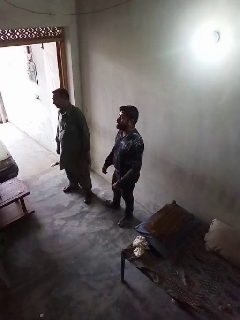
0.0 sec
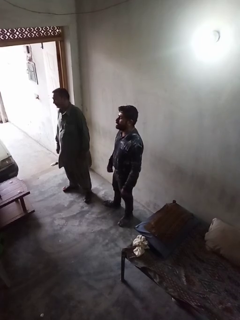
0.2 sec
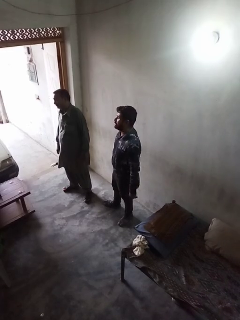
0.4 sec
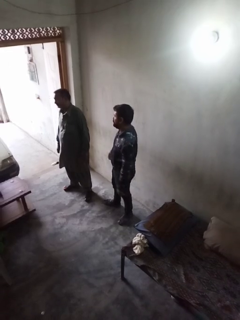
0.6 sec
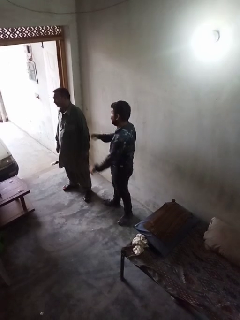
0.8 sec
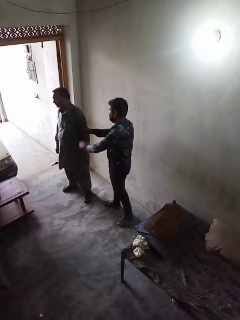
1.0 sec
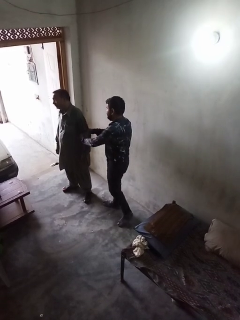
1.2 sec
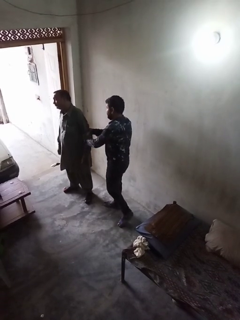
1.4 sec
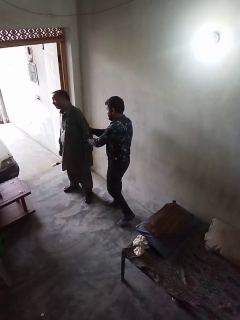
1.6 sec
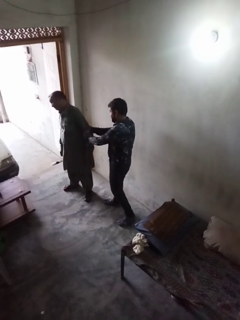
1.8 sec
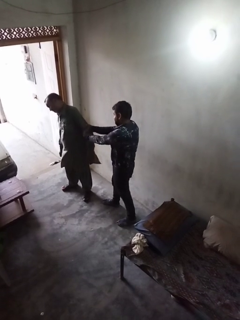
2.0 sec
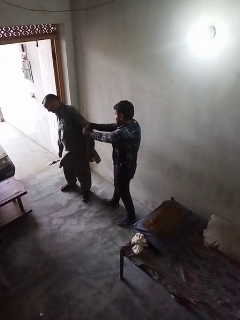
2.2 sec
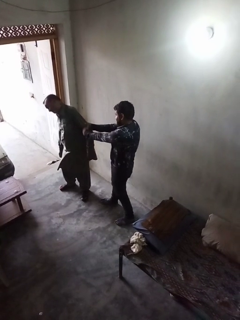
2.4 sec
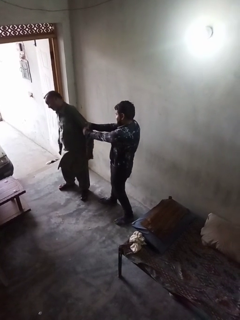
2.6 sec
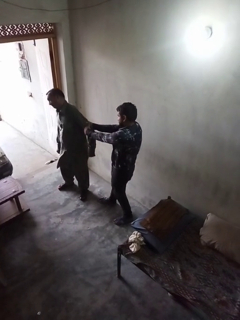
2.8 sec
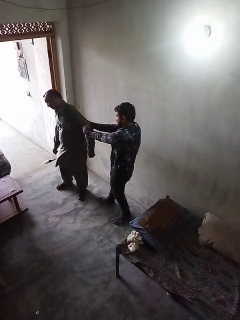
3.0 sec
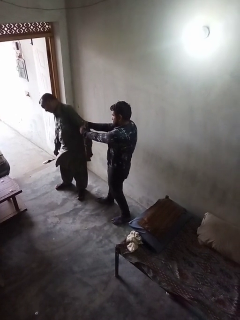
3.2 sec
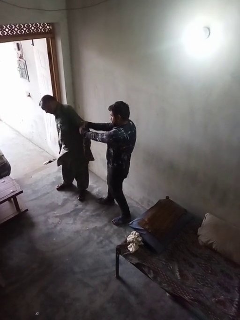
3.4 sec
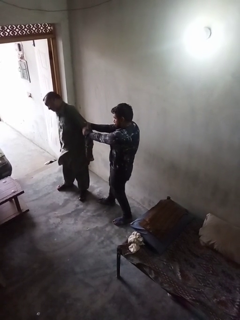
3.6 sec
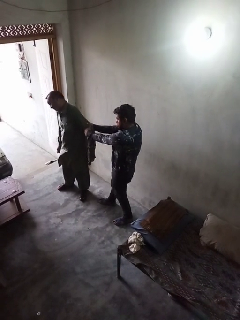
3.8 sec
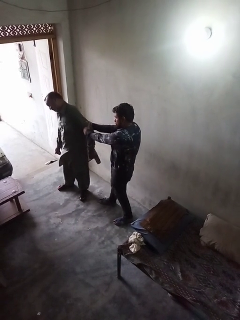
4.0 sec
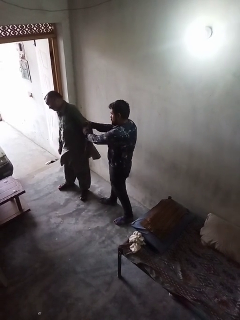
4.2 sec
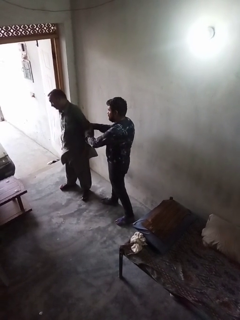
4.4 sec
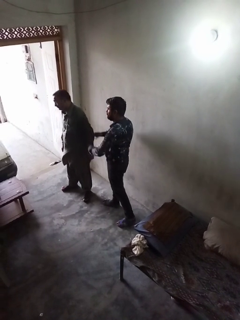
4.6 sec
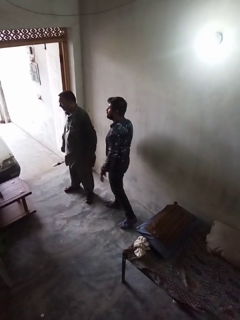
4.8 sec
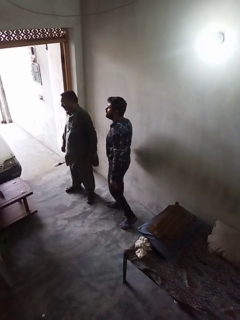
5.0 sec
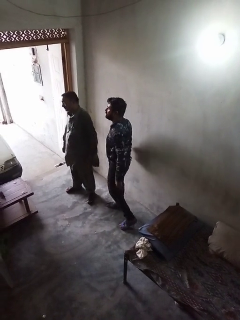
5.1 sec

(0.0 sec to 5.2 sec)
person grabs person by forearm

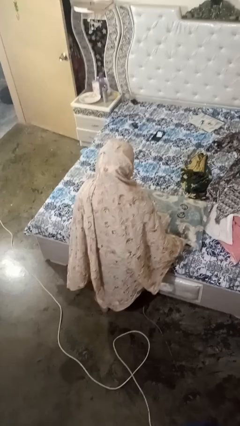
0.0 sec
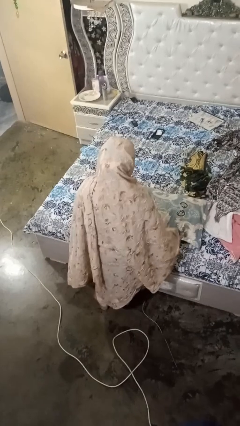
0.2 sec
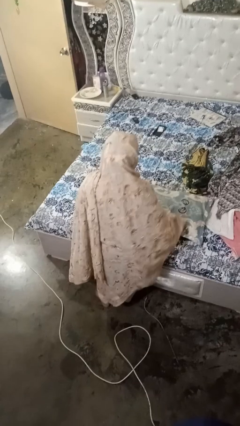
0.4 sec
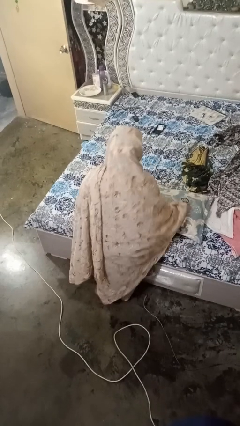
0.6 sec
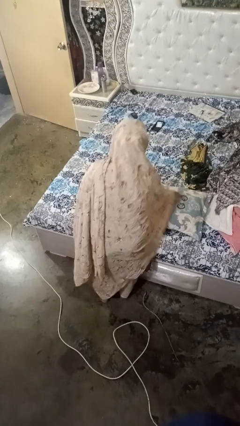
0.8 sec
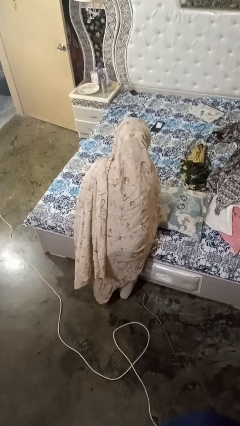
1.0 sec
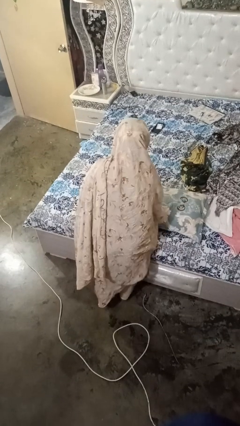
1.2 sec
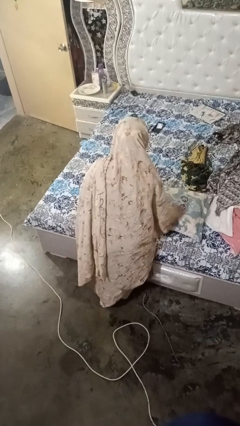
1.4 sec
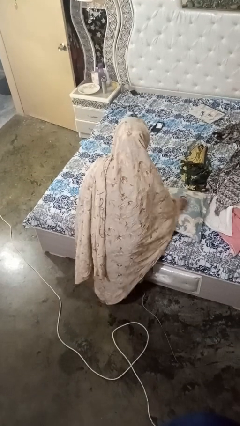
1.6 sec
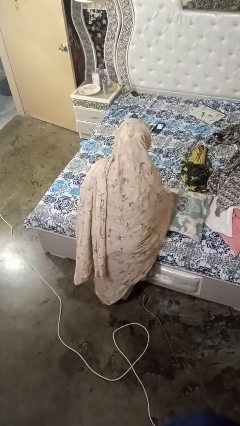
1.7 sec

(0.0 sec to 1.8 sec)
person waves hand over object

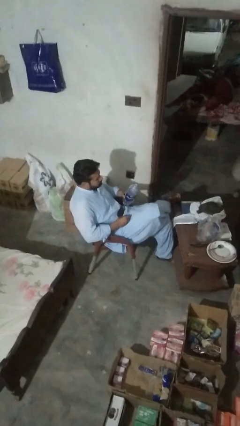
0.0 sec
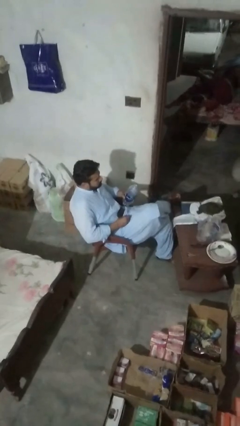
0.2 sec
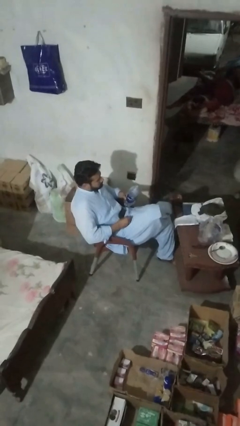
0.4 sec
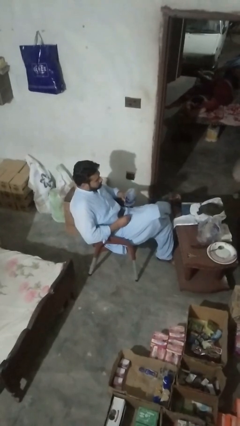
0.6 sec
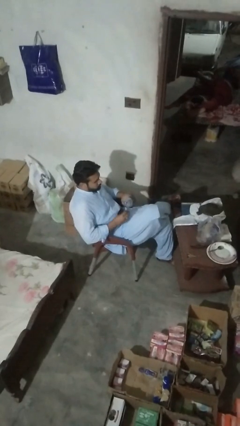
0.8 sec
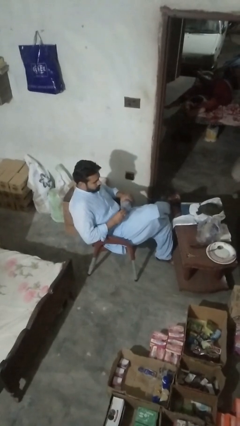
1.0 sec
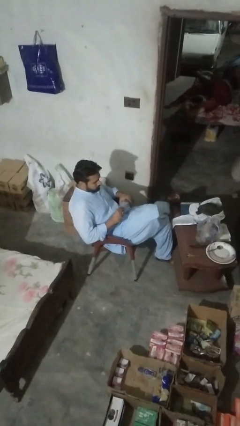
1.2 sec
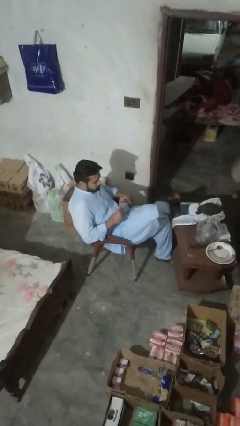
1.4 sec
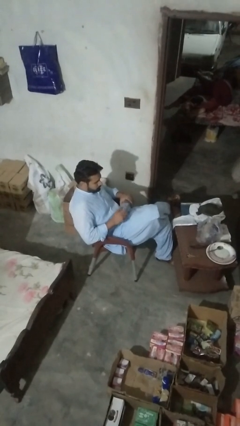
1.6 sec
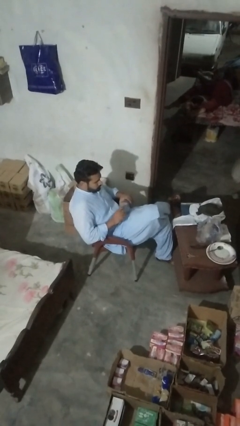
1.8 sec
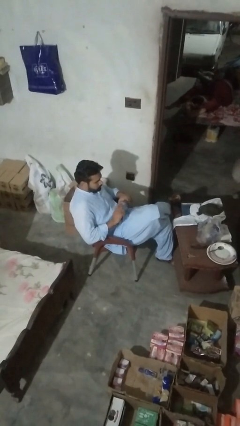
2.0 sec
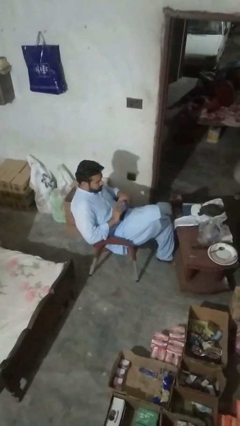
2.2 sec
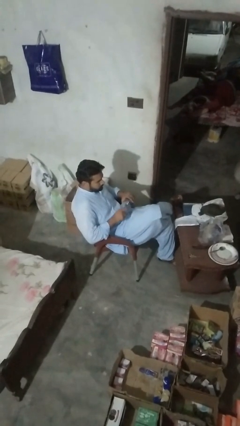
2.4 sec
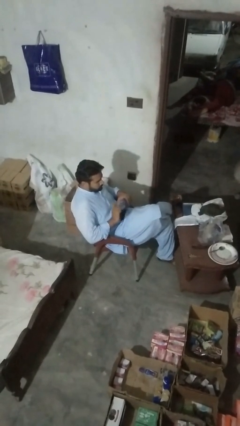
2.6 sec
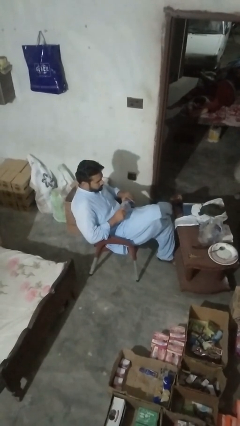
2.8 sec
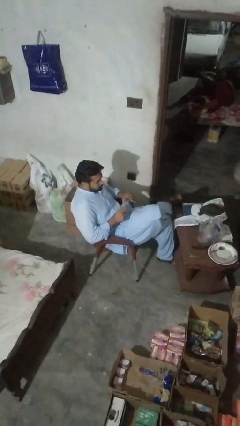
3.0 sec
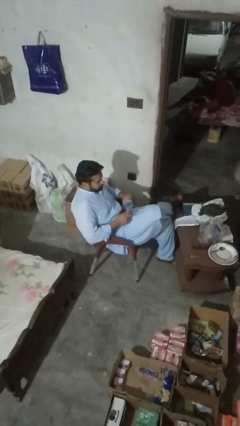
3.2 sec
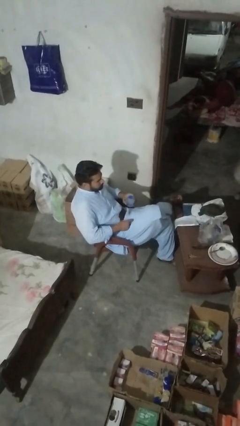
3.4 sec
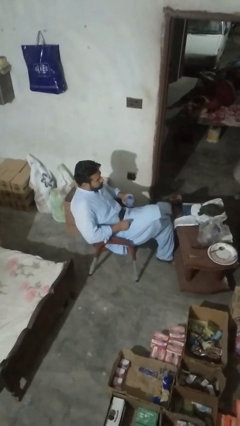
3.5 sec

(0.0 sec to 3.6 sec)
person screws lid to bottle

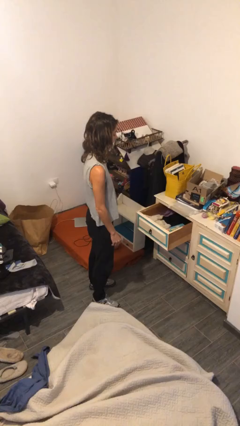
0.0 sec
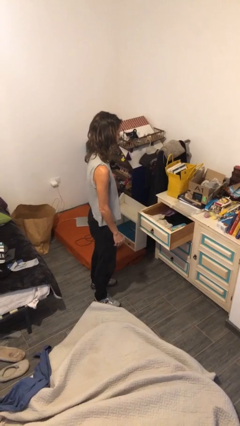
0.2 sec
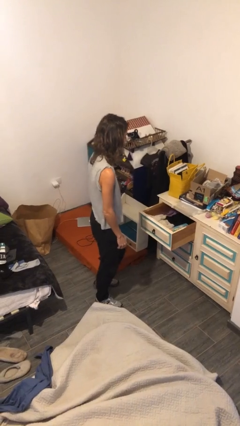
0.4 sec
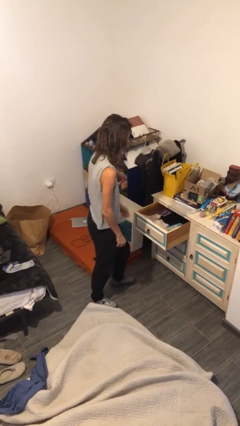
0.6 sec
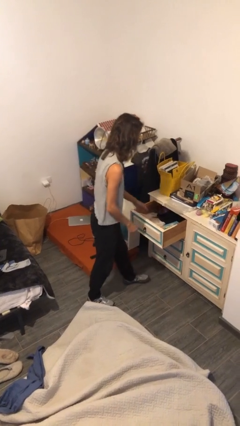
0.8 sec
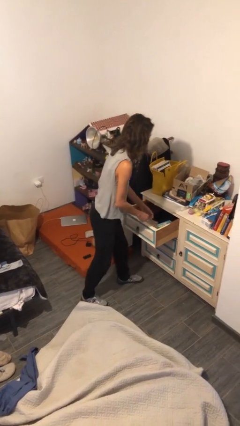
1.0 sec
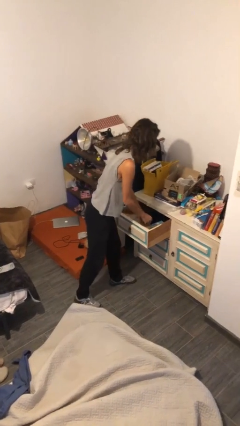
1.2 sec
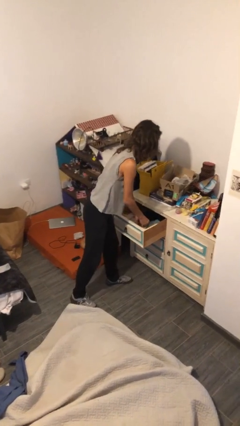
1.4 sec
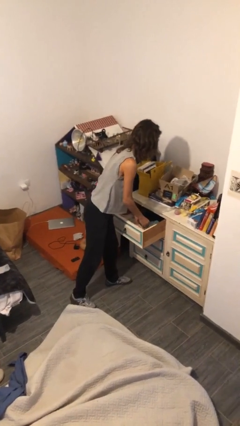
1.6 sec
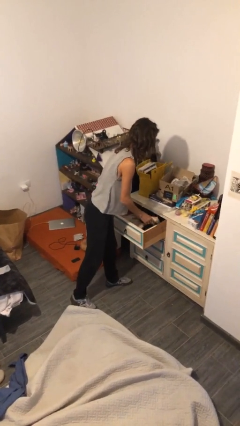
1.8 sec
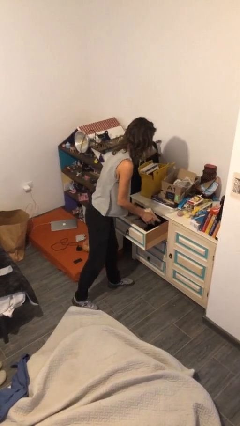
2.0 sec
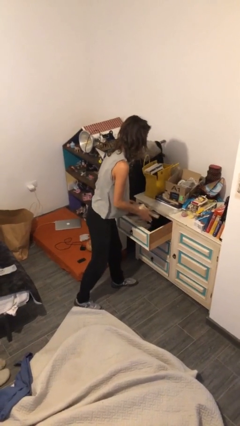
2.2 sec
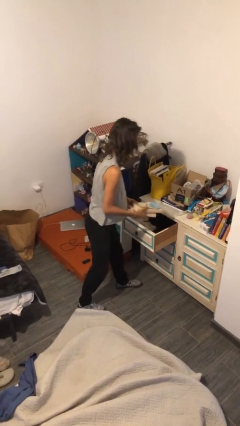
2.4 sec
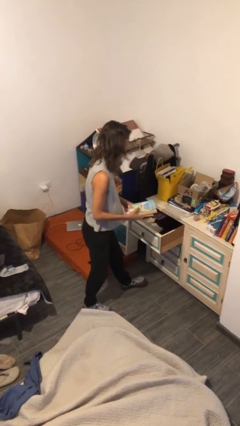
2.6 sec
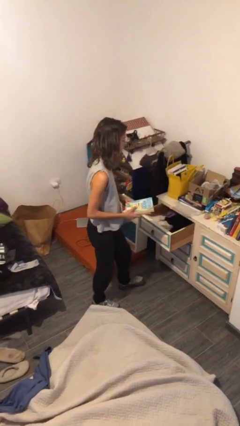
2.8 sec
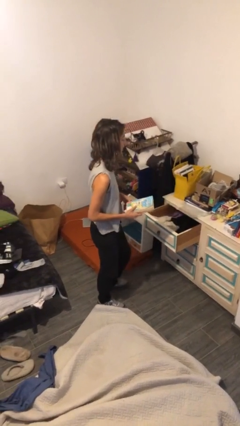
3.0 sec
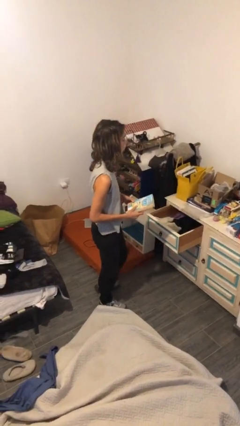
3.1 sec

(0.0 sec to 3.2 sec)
person picks up object from cabinet

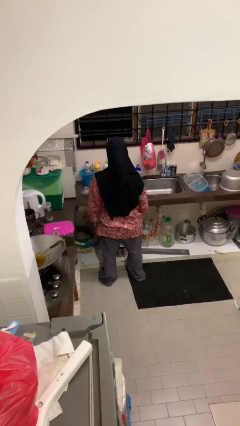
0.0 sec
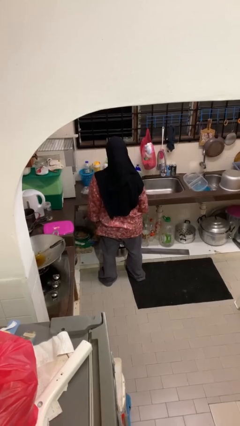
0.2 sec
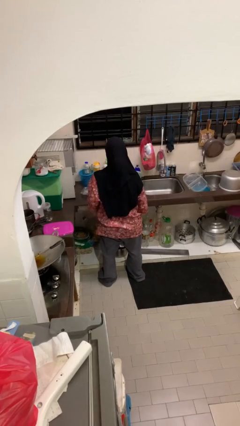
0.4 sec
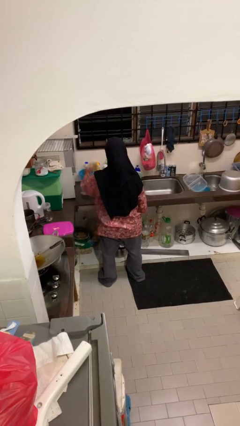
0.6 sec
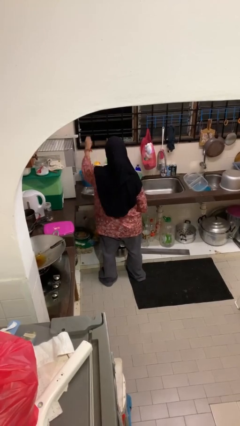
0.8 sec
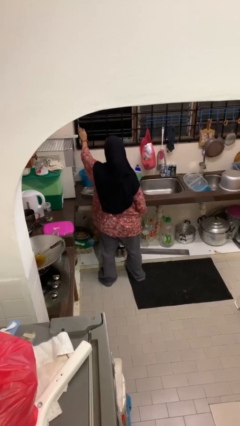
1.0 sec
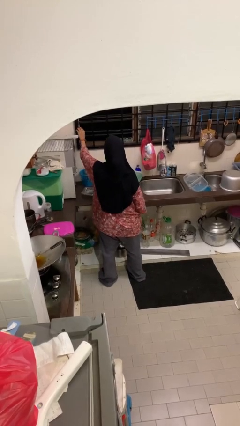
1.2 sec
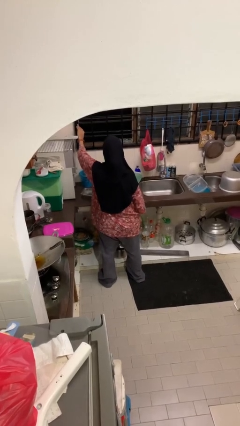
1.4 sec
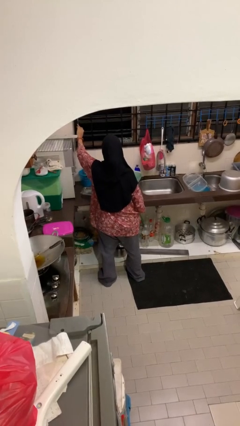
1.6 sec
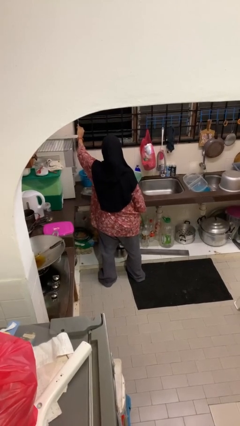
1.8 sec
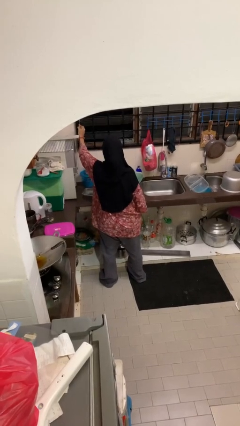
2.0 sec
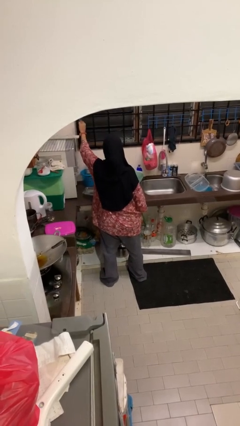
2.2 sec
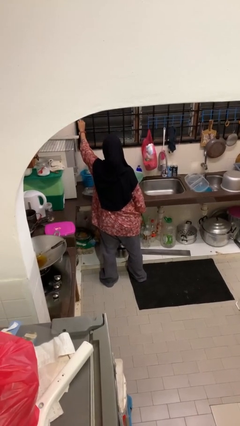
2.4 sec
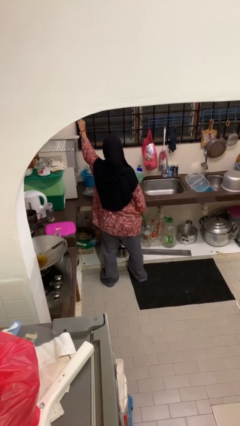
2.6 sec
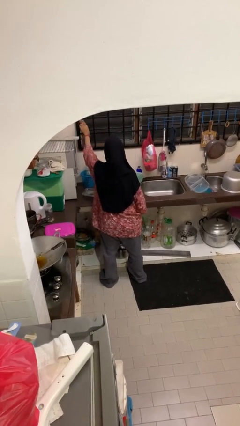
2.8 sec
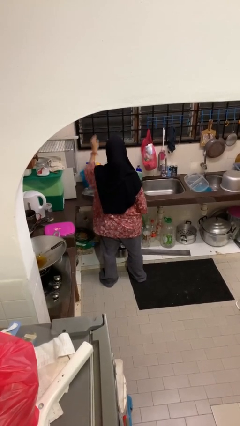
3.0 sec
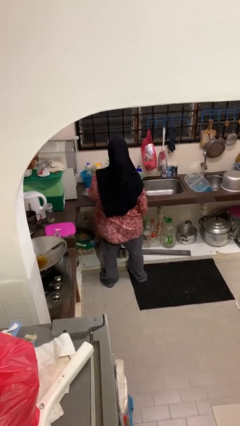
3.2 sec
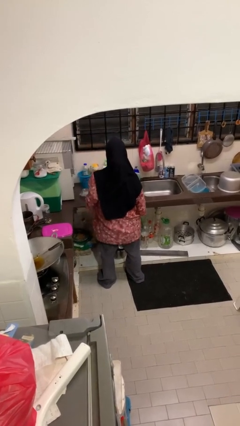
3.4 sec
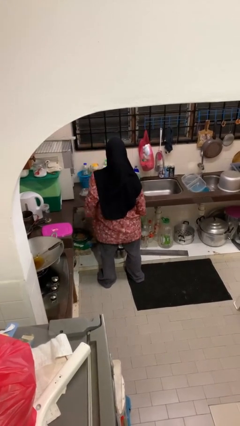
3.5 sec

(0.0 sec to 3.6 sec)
person closes home window

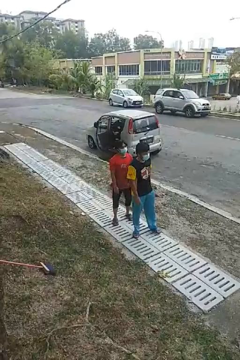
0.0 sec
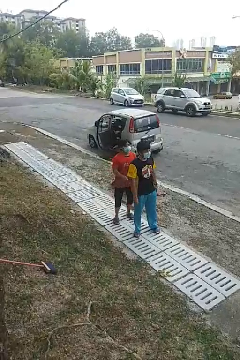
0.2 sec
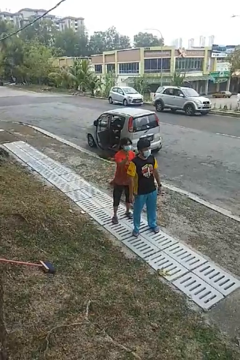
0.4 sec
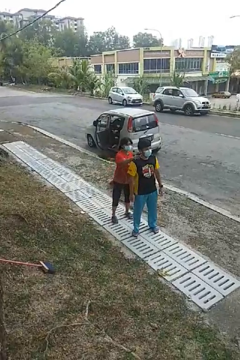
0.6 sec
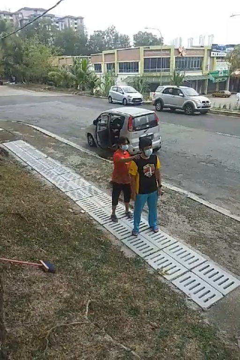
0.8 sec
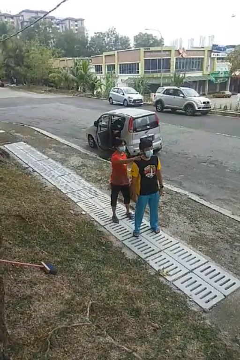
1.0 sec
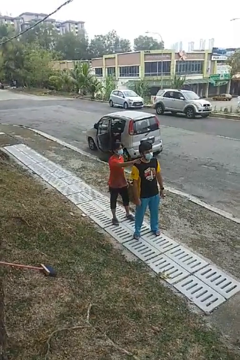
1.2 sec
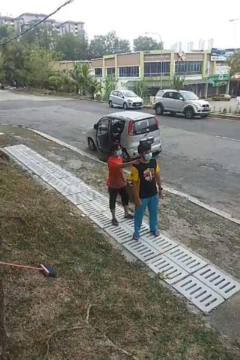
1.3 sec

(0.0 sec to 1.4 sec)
person grabs person by shoulder

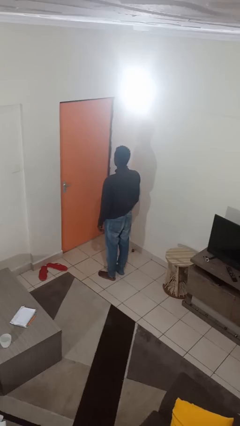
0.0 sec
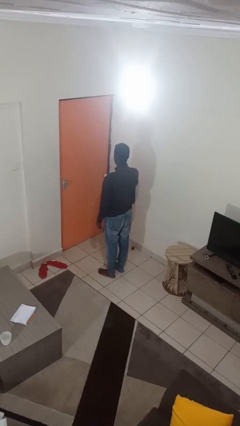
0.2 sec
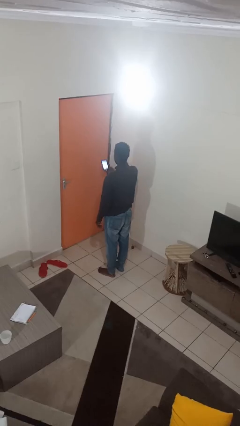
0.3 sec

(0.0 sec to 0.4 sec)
person takes selfie
